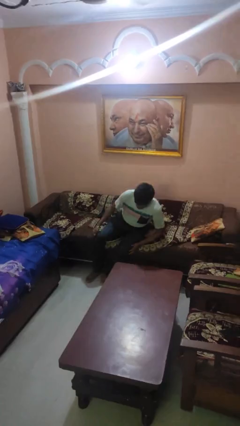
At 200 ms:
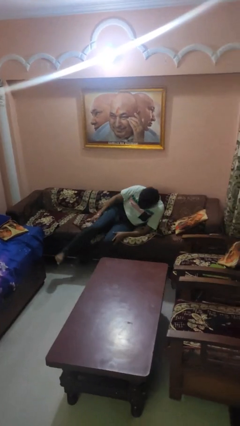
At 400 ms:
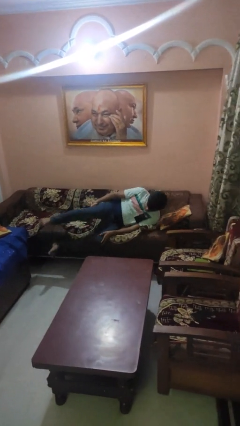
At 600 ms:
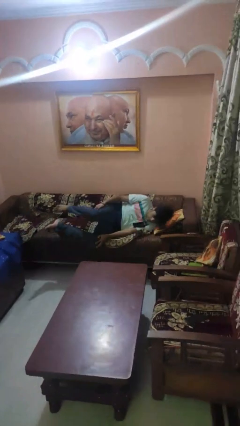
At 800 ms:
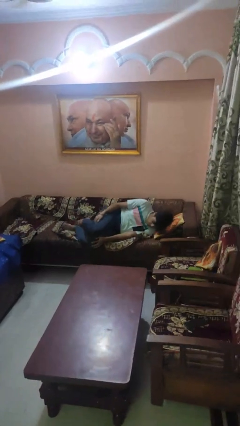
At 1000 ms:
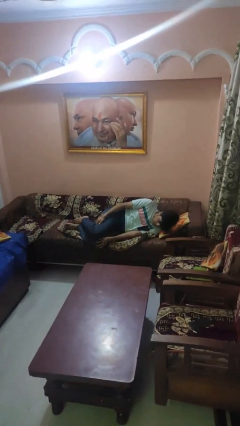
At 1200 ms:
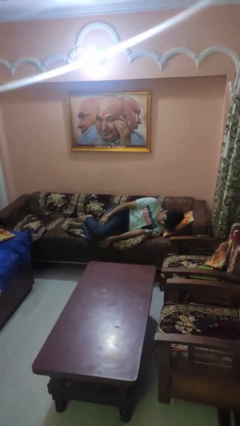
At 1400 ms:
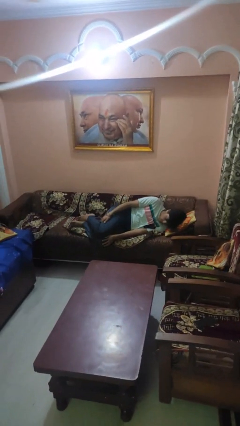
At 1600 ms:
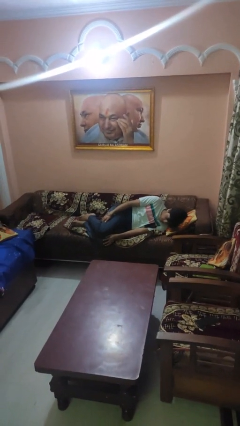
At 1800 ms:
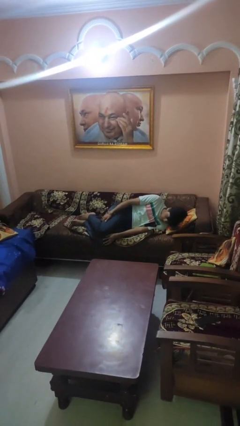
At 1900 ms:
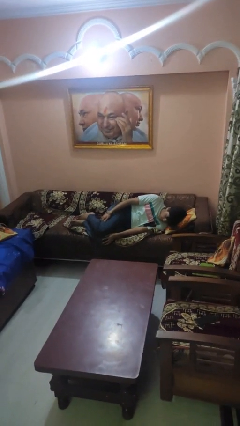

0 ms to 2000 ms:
person lies down on couch

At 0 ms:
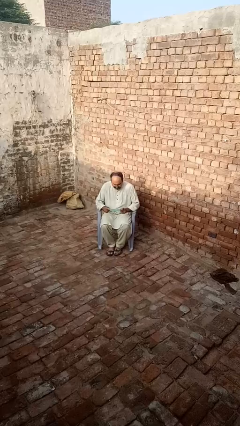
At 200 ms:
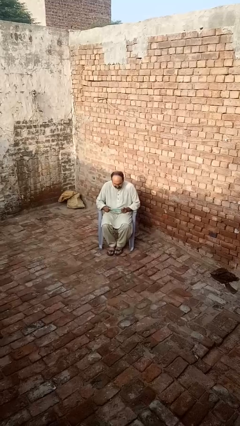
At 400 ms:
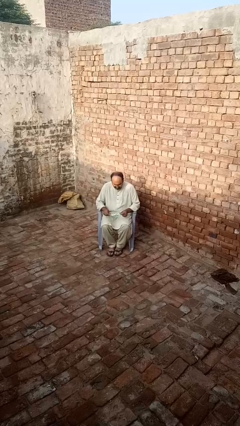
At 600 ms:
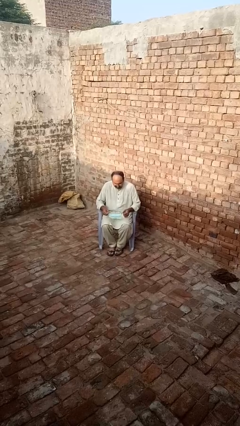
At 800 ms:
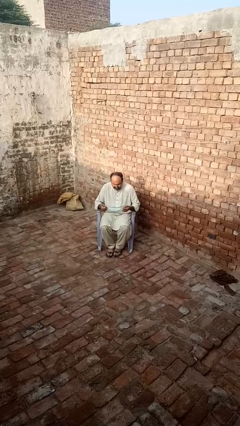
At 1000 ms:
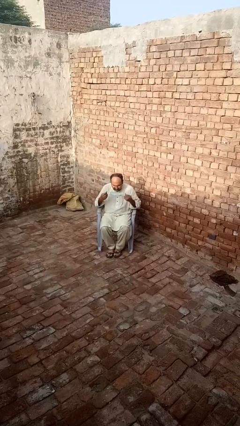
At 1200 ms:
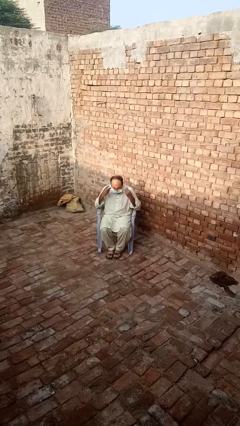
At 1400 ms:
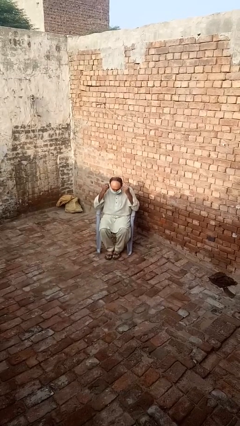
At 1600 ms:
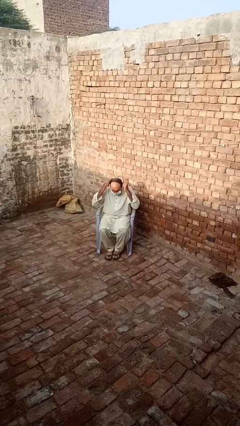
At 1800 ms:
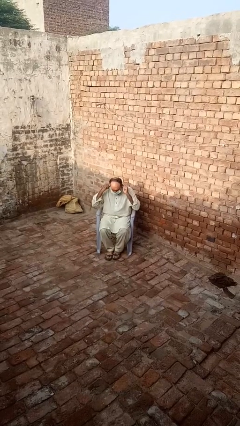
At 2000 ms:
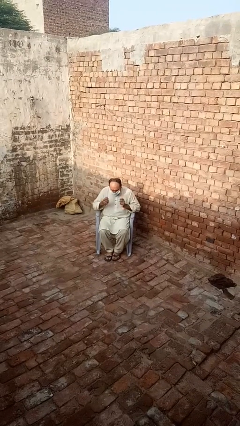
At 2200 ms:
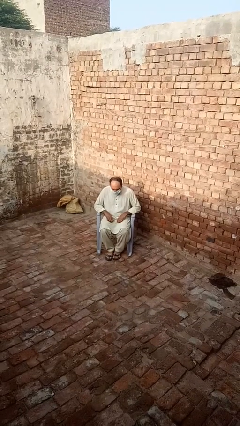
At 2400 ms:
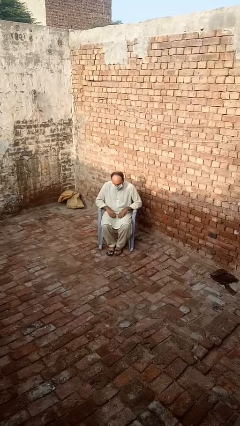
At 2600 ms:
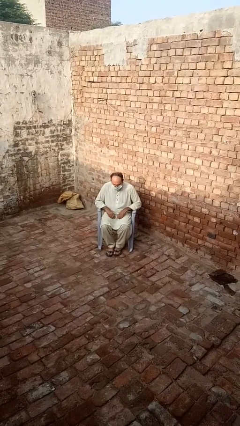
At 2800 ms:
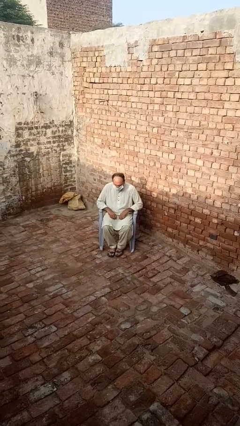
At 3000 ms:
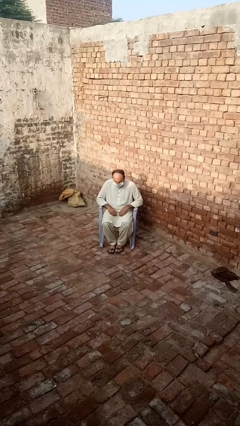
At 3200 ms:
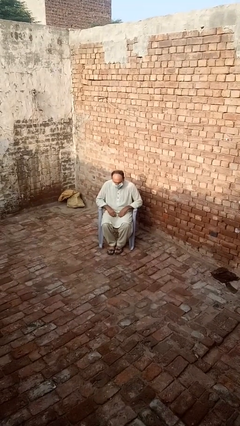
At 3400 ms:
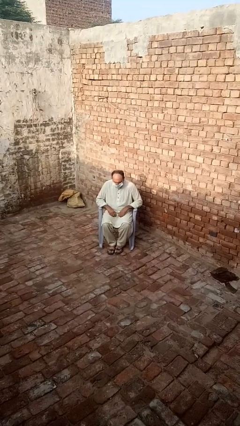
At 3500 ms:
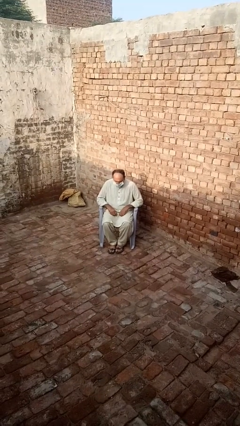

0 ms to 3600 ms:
person puts on facemask

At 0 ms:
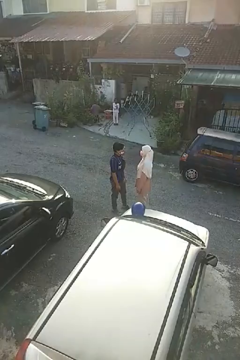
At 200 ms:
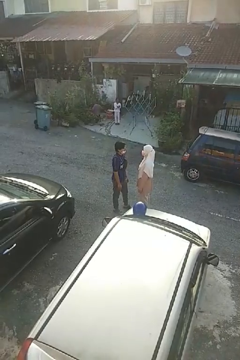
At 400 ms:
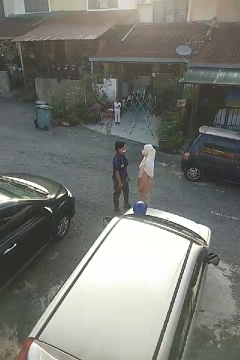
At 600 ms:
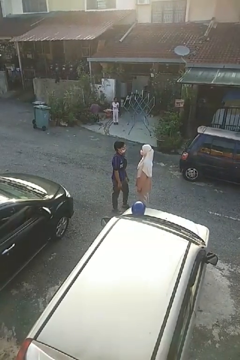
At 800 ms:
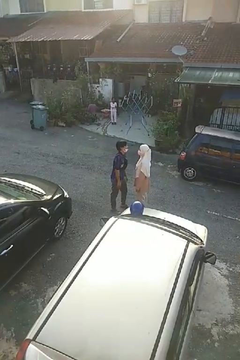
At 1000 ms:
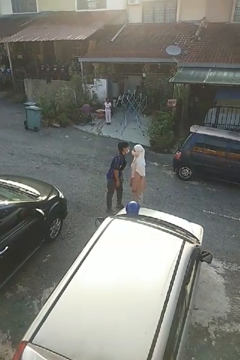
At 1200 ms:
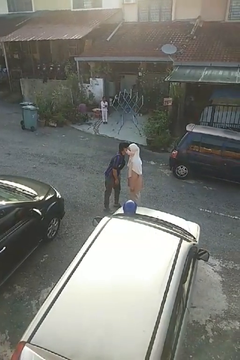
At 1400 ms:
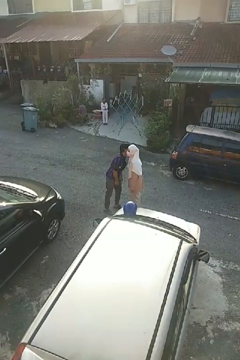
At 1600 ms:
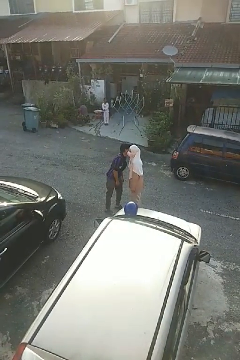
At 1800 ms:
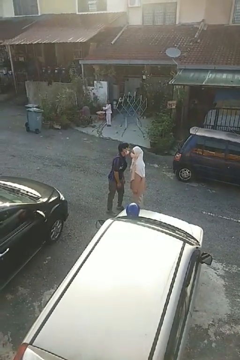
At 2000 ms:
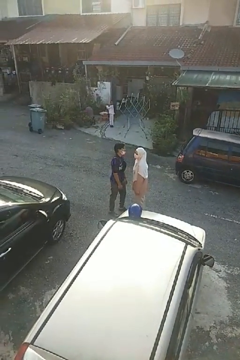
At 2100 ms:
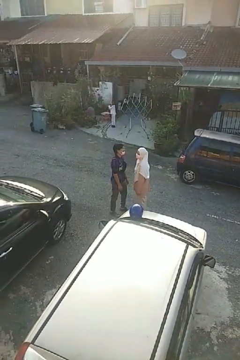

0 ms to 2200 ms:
person kisses cheek of person

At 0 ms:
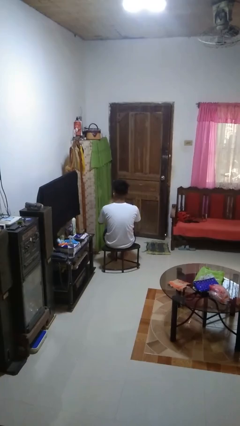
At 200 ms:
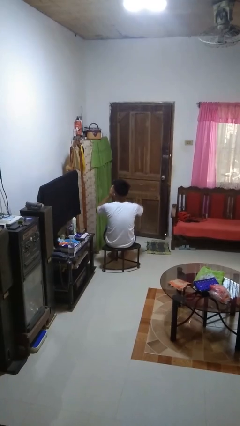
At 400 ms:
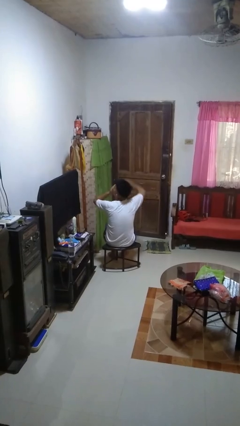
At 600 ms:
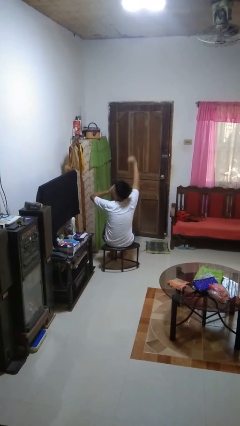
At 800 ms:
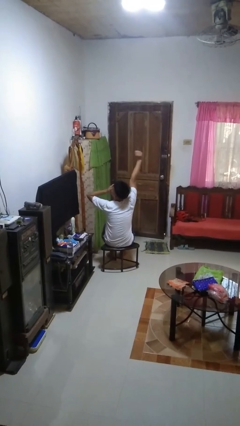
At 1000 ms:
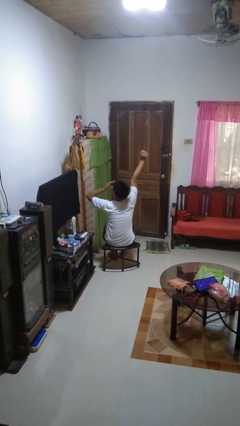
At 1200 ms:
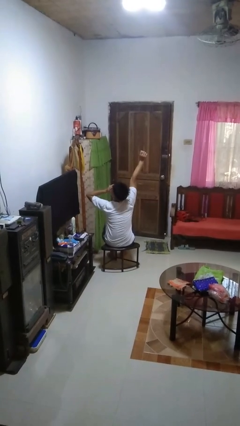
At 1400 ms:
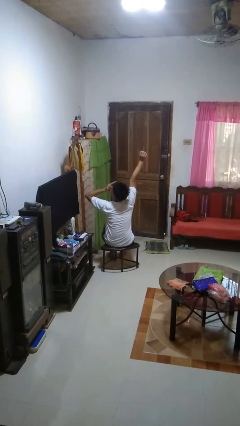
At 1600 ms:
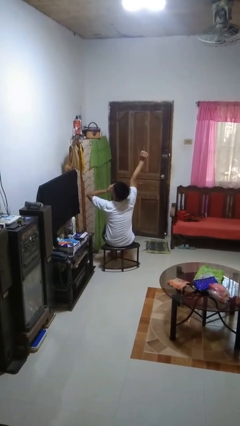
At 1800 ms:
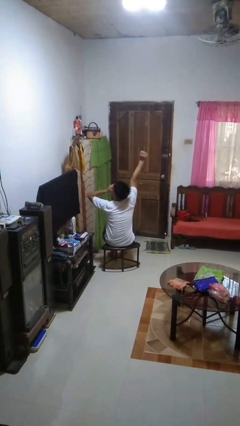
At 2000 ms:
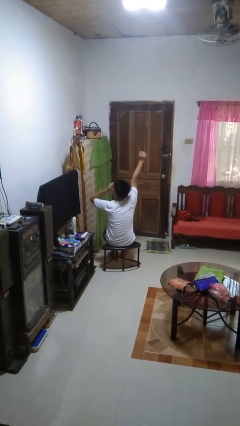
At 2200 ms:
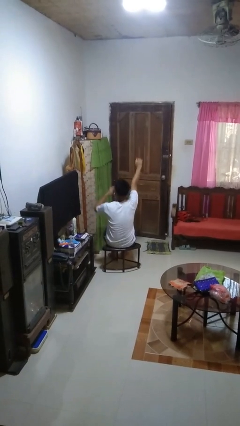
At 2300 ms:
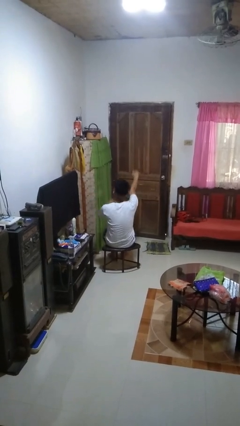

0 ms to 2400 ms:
person yawns

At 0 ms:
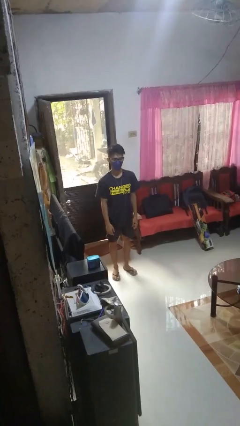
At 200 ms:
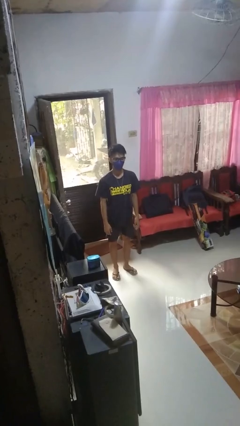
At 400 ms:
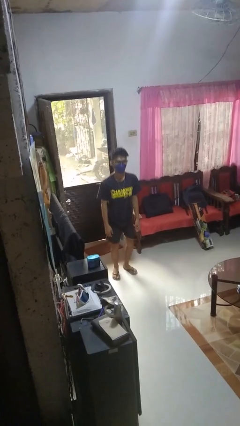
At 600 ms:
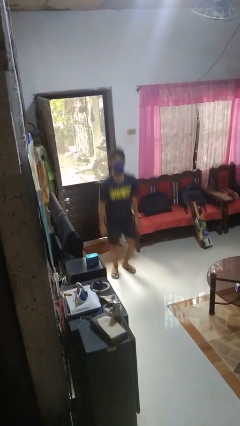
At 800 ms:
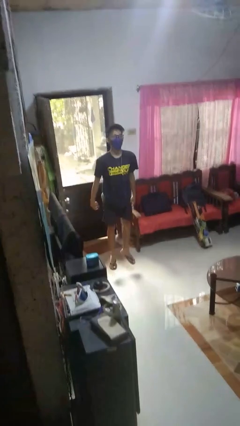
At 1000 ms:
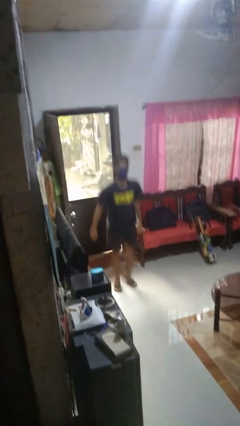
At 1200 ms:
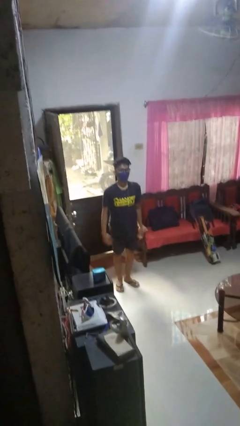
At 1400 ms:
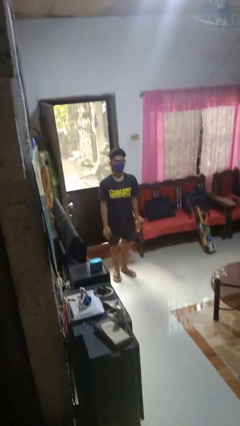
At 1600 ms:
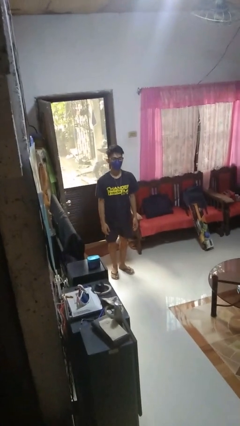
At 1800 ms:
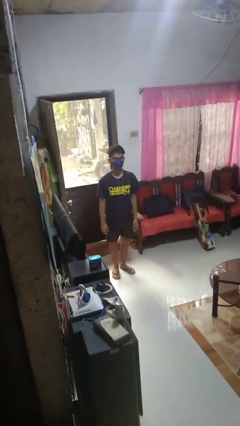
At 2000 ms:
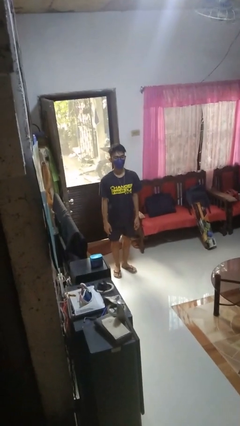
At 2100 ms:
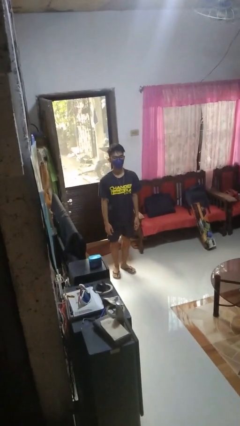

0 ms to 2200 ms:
person jumps

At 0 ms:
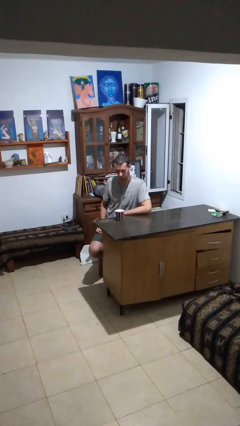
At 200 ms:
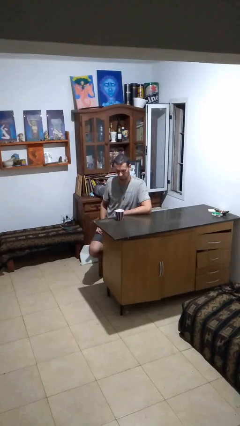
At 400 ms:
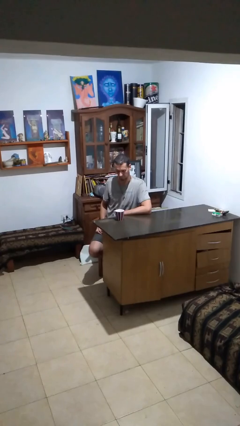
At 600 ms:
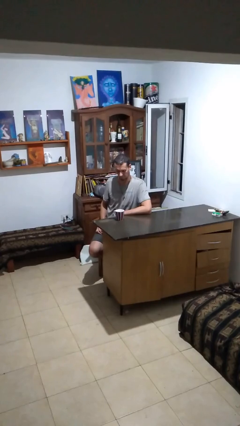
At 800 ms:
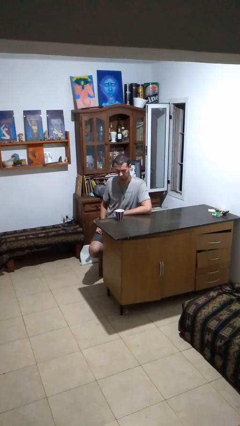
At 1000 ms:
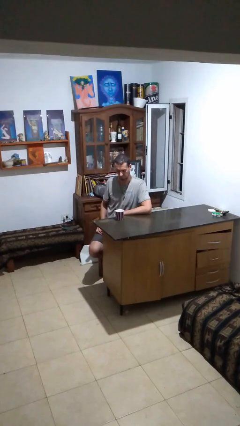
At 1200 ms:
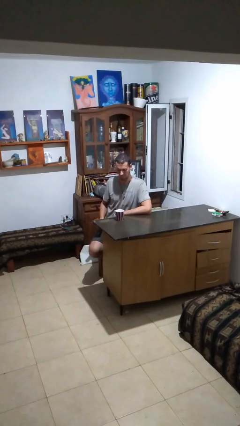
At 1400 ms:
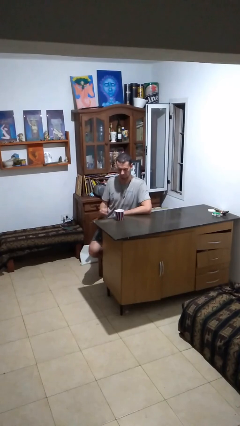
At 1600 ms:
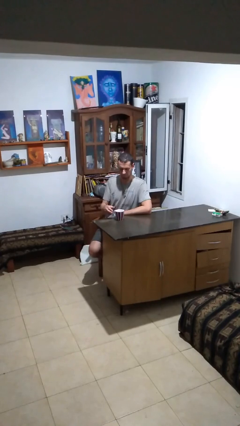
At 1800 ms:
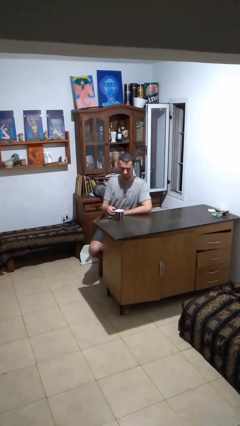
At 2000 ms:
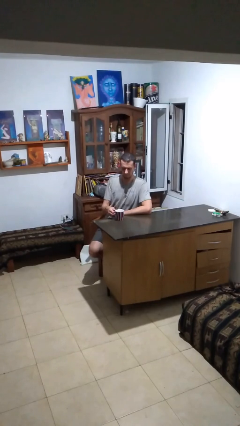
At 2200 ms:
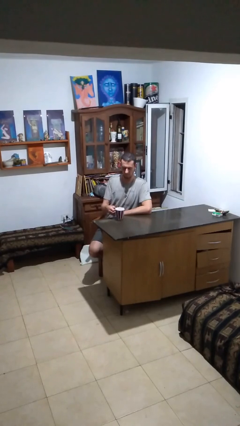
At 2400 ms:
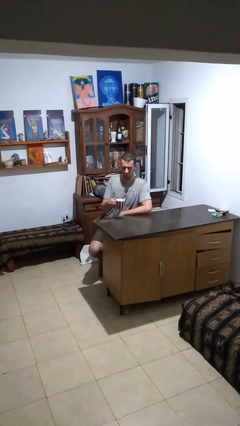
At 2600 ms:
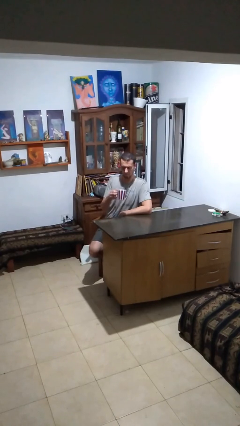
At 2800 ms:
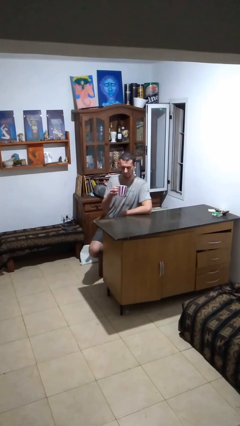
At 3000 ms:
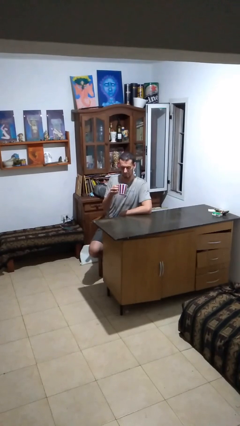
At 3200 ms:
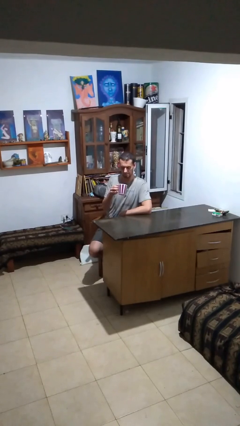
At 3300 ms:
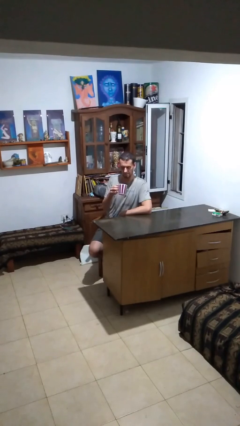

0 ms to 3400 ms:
person picks up object from table

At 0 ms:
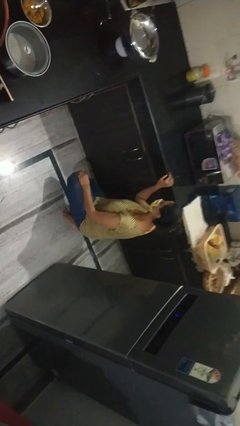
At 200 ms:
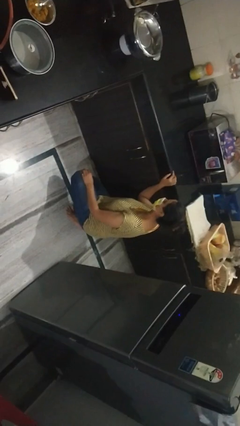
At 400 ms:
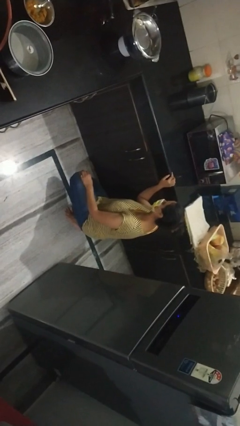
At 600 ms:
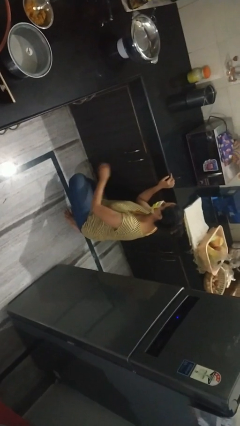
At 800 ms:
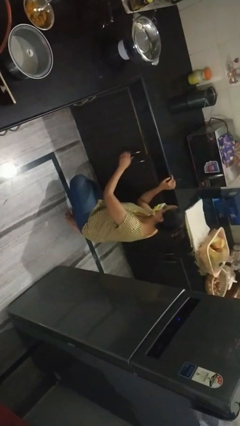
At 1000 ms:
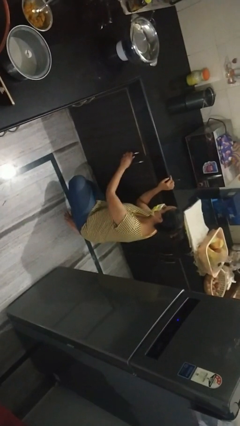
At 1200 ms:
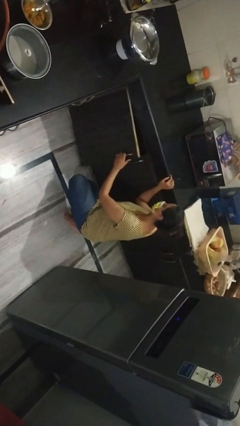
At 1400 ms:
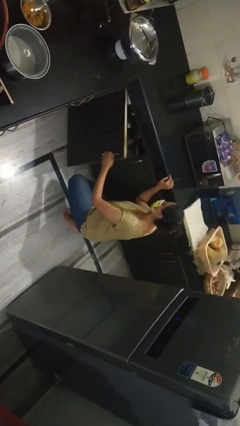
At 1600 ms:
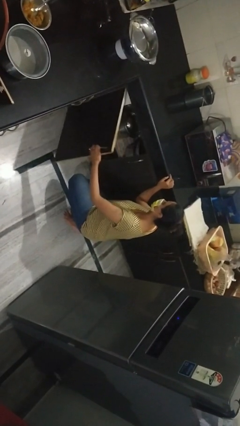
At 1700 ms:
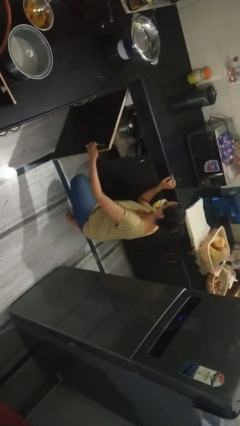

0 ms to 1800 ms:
person opens cabinet
